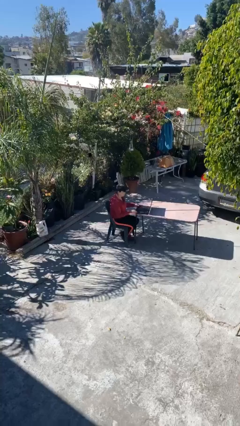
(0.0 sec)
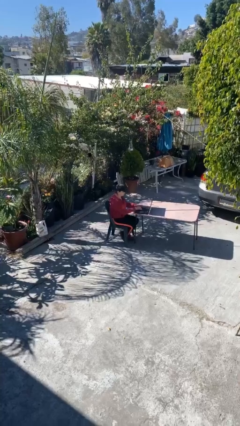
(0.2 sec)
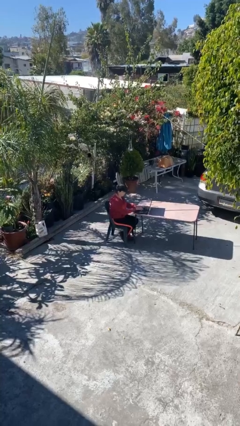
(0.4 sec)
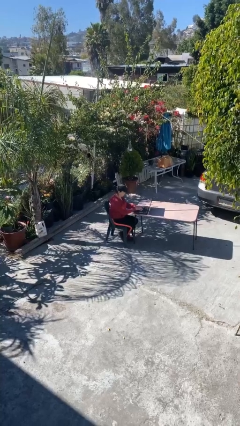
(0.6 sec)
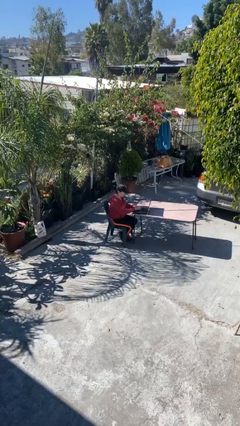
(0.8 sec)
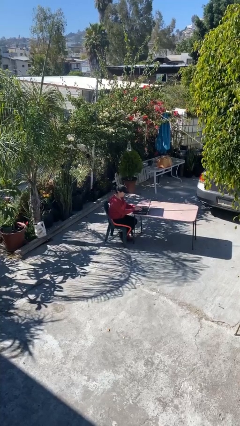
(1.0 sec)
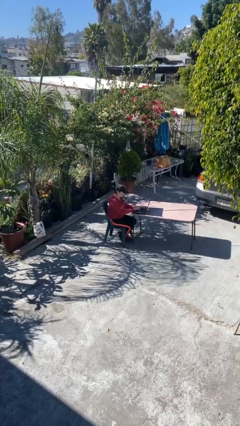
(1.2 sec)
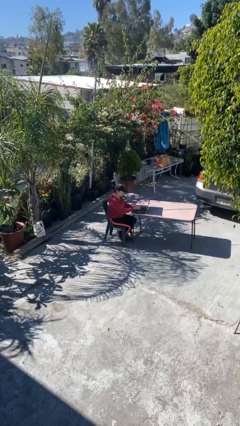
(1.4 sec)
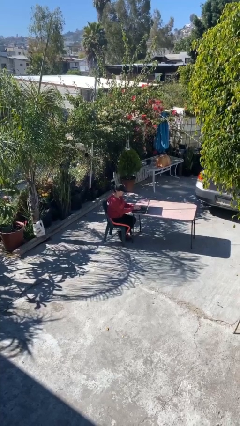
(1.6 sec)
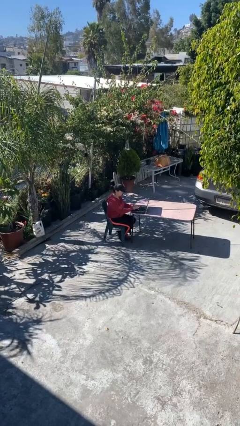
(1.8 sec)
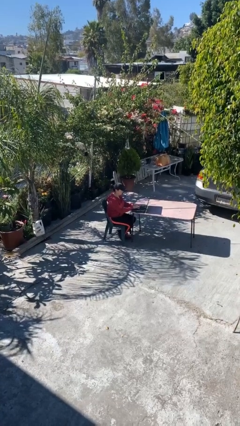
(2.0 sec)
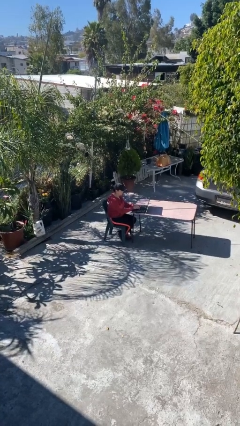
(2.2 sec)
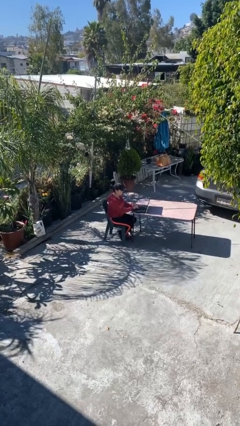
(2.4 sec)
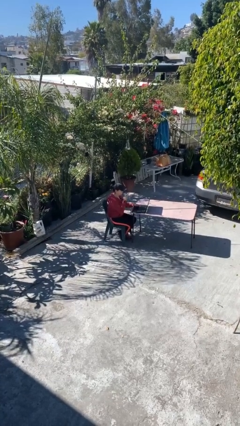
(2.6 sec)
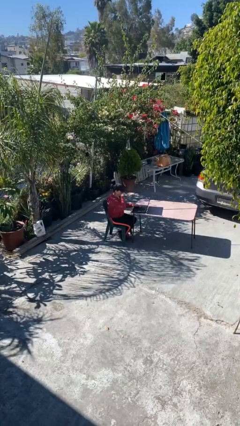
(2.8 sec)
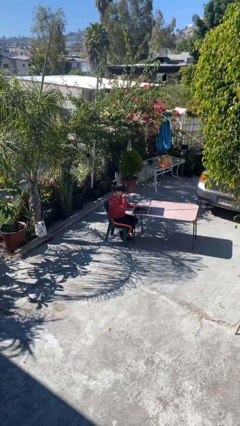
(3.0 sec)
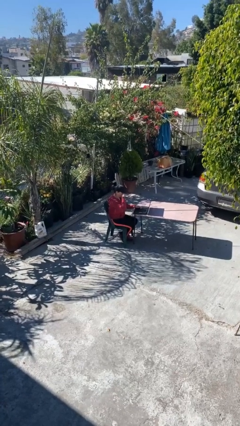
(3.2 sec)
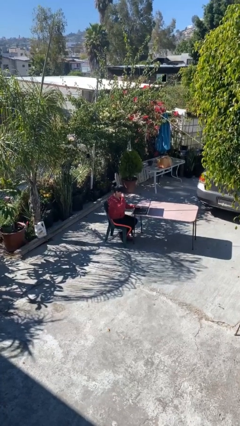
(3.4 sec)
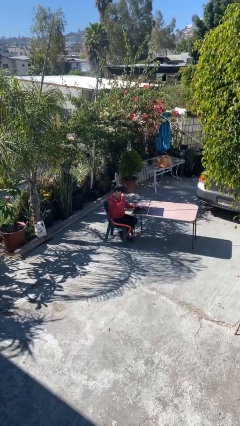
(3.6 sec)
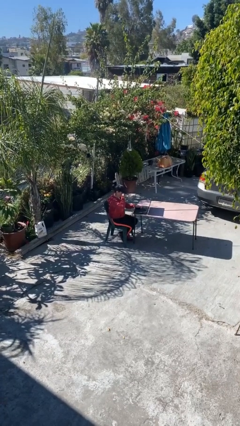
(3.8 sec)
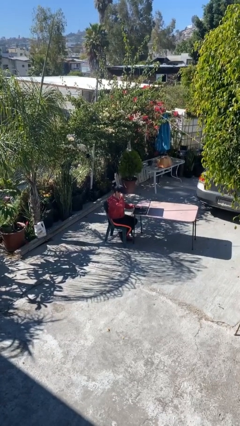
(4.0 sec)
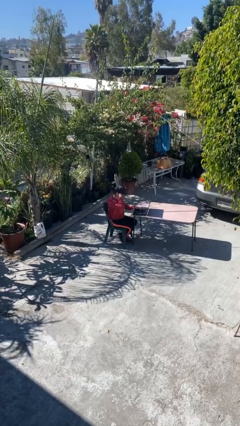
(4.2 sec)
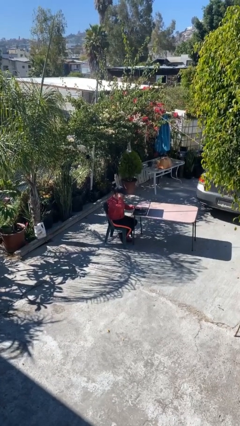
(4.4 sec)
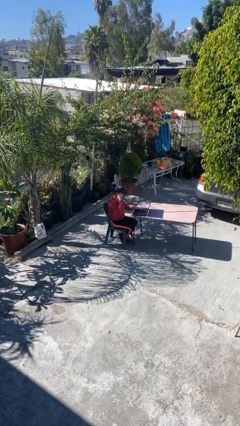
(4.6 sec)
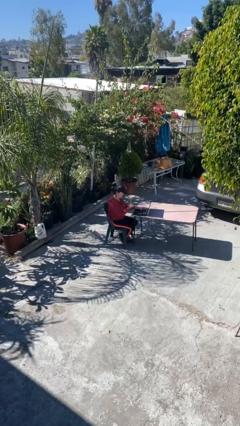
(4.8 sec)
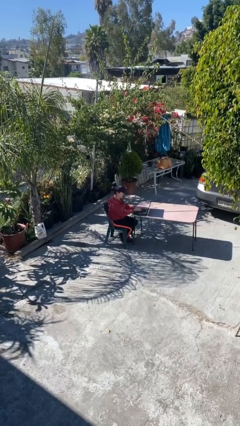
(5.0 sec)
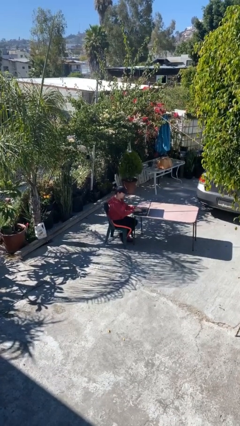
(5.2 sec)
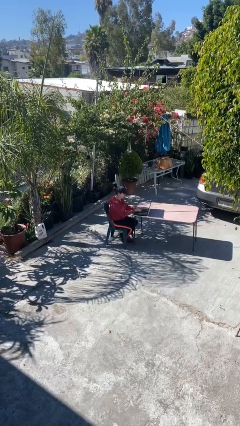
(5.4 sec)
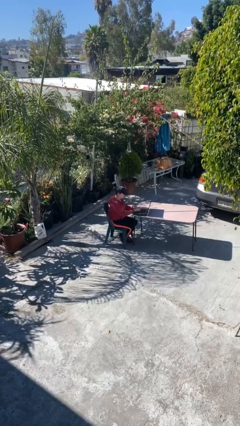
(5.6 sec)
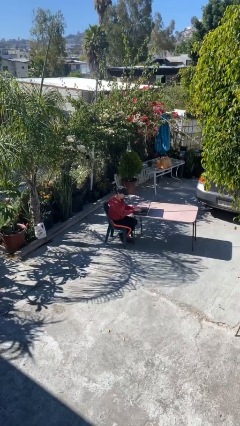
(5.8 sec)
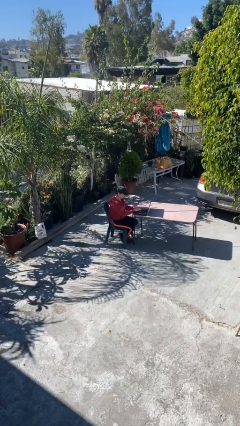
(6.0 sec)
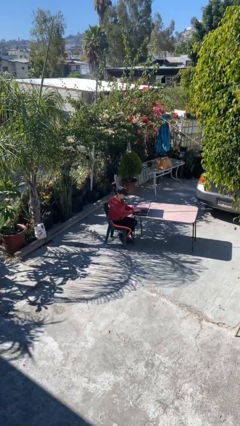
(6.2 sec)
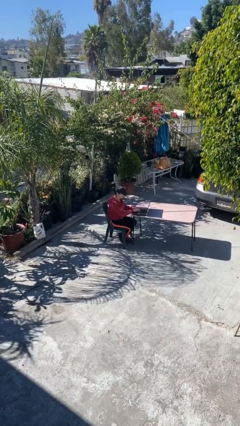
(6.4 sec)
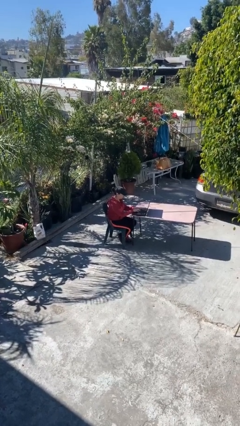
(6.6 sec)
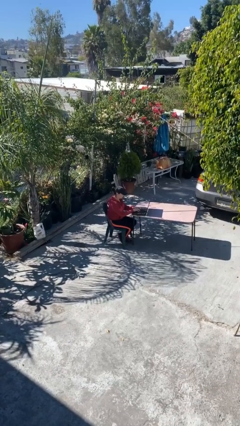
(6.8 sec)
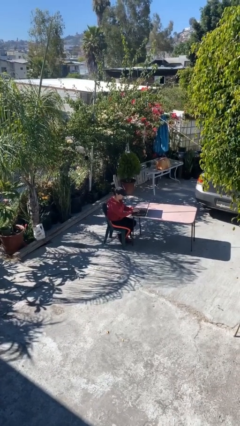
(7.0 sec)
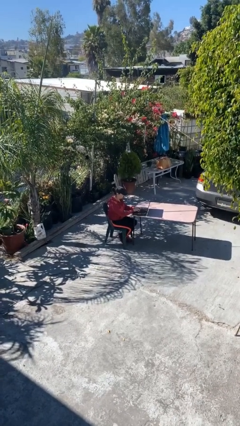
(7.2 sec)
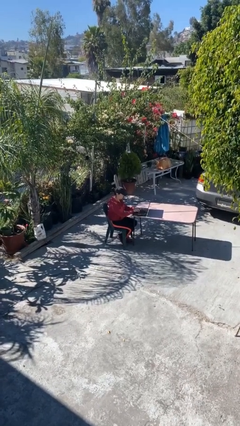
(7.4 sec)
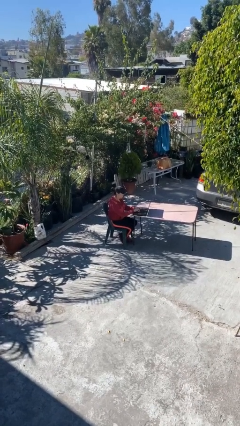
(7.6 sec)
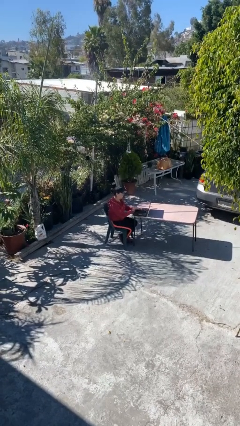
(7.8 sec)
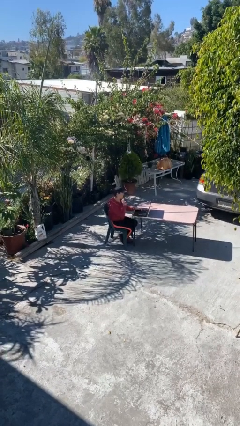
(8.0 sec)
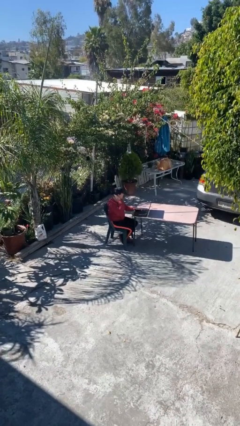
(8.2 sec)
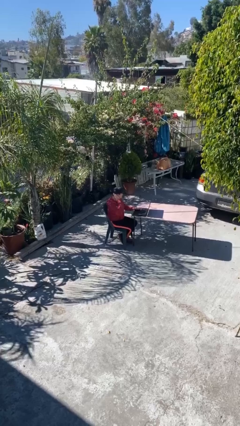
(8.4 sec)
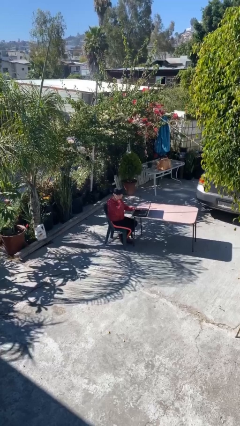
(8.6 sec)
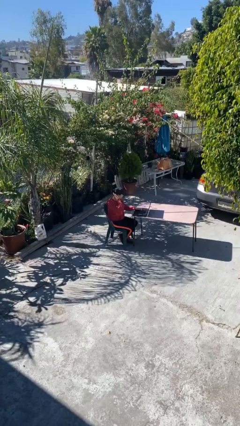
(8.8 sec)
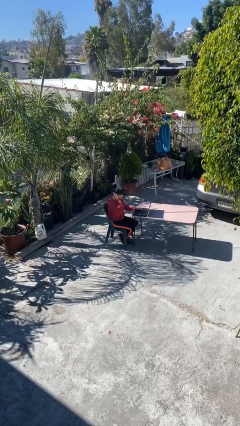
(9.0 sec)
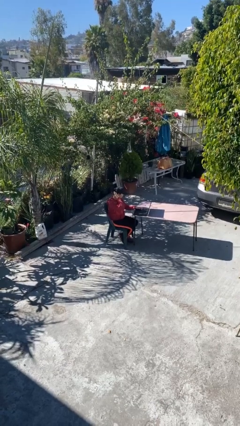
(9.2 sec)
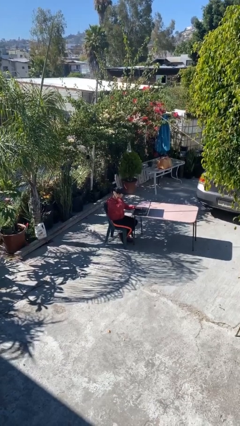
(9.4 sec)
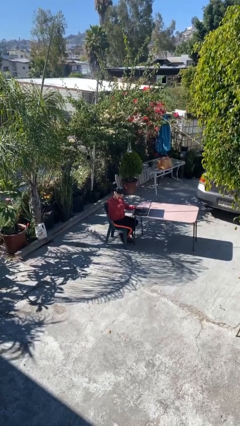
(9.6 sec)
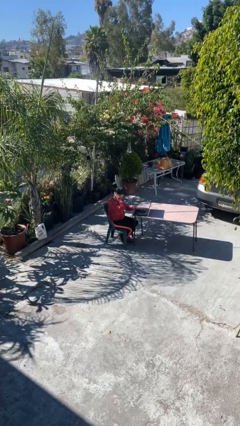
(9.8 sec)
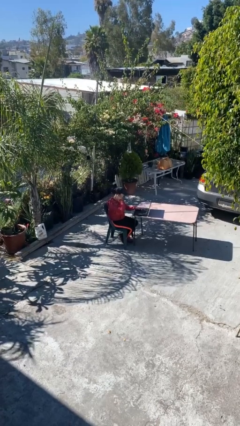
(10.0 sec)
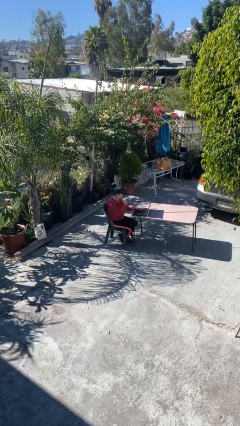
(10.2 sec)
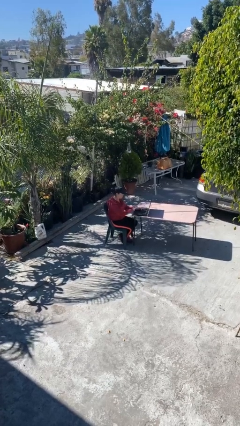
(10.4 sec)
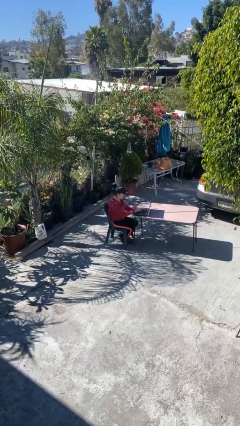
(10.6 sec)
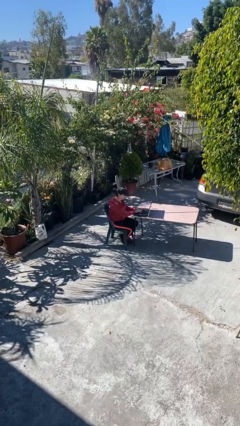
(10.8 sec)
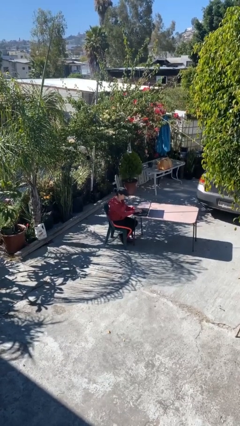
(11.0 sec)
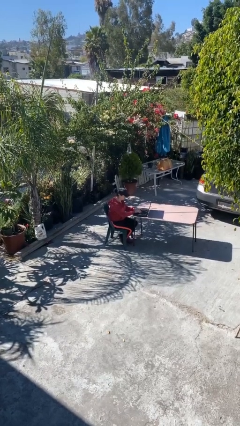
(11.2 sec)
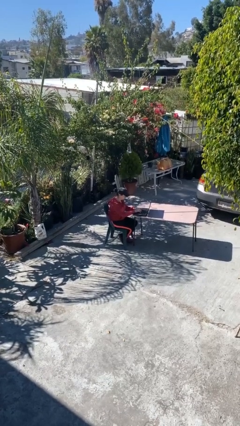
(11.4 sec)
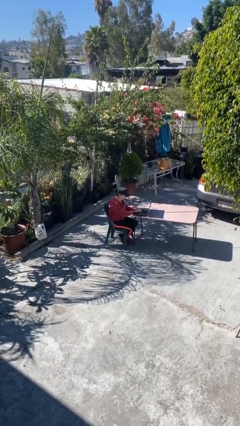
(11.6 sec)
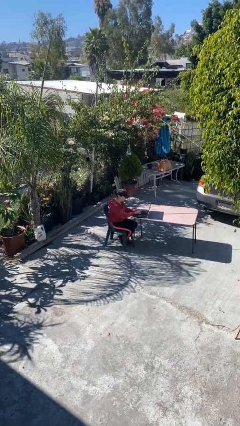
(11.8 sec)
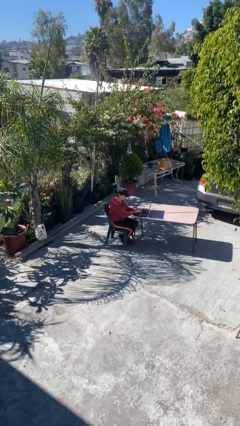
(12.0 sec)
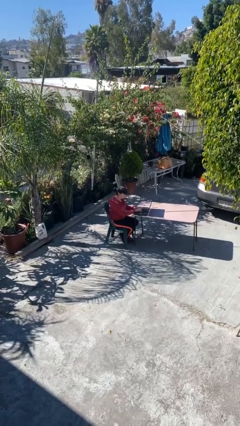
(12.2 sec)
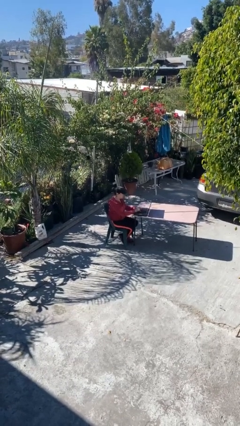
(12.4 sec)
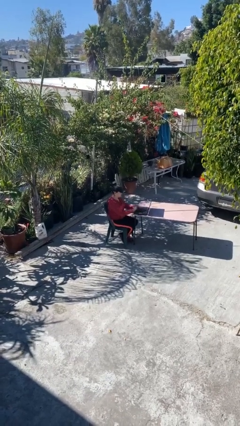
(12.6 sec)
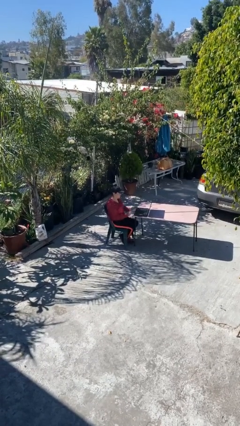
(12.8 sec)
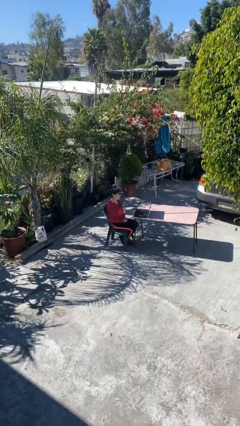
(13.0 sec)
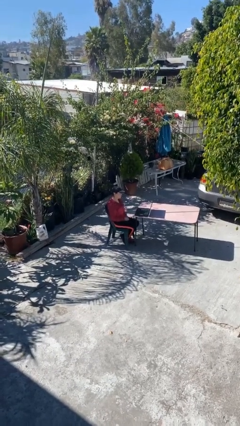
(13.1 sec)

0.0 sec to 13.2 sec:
person interacts with laptop

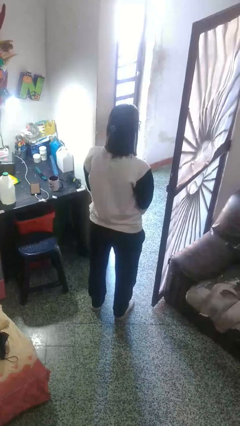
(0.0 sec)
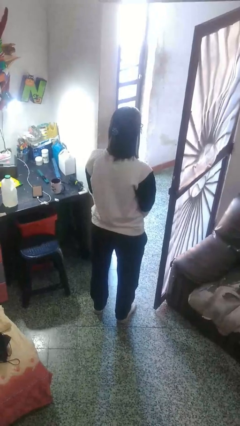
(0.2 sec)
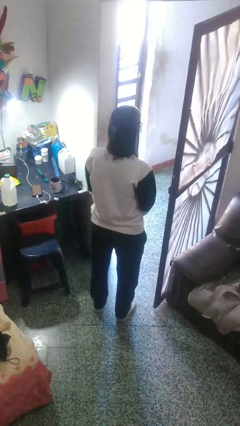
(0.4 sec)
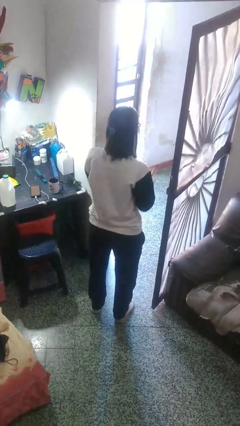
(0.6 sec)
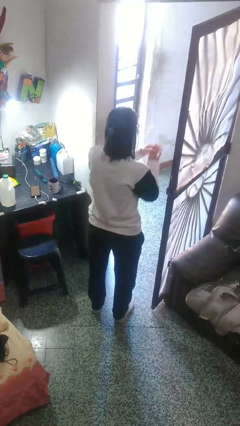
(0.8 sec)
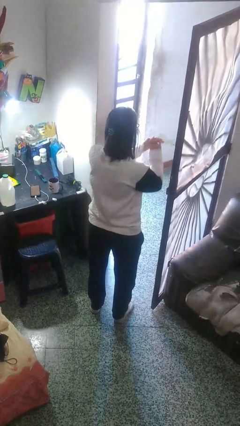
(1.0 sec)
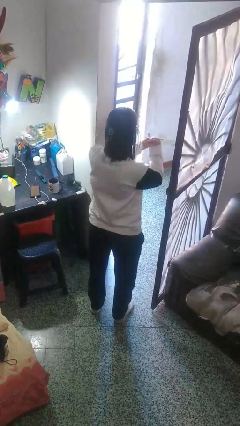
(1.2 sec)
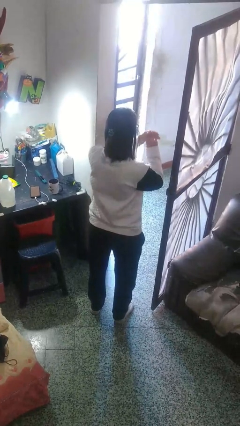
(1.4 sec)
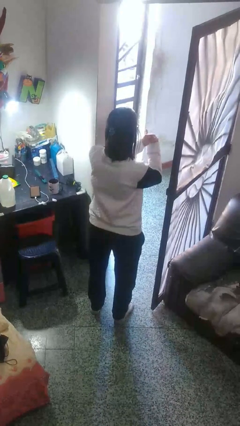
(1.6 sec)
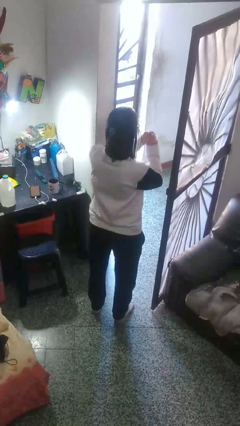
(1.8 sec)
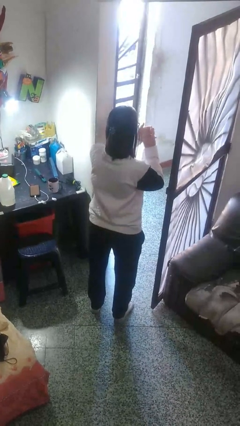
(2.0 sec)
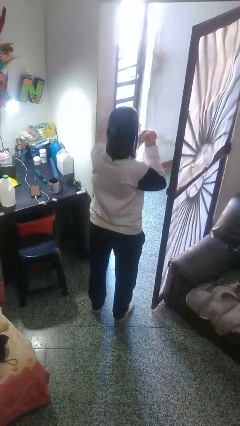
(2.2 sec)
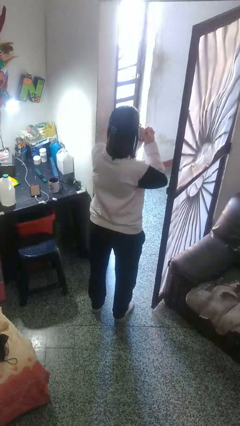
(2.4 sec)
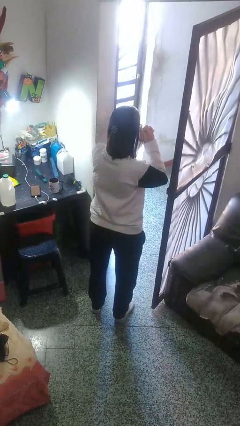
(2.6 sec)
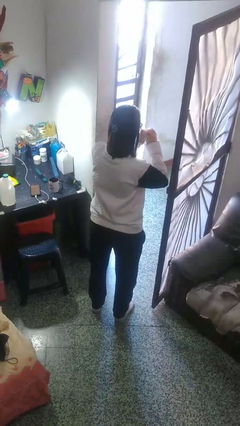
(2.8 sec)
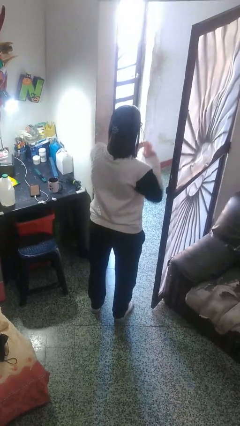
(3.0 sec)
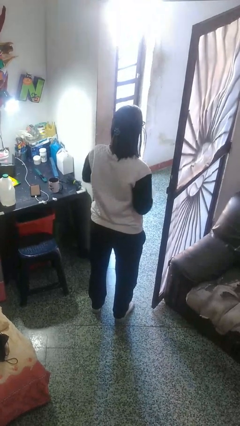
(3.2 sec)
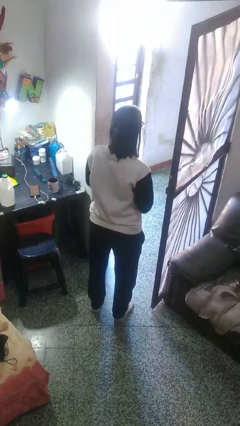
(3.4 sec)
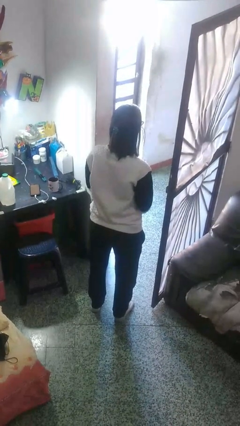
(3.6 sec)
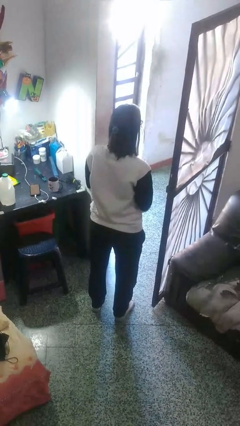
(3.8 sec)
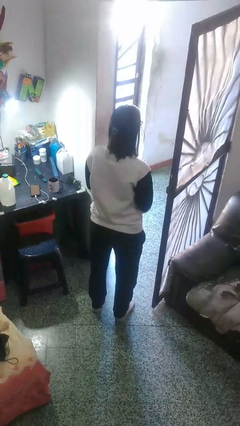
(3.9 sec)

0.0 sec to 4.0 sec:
person cracks knuckles

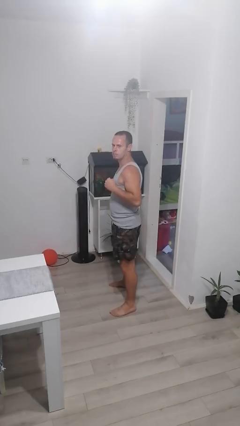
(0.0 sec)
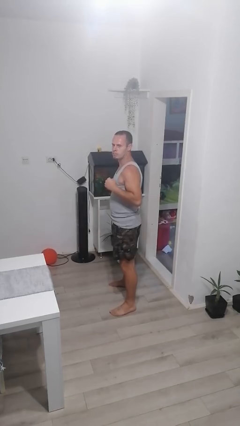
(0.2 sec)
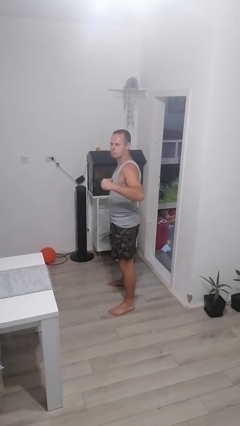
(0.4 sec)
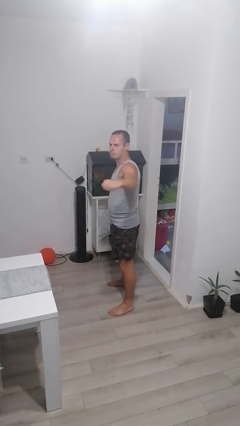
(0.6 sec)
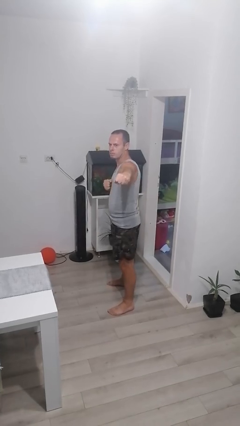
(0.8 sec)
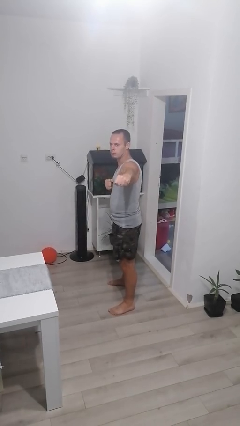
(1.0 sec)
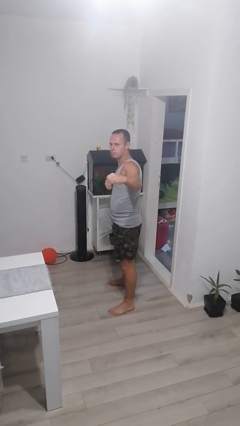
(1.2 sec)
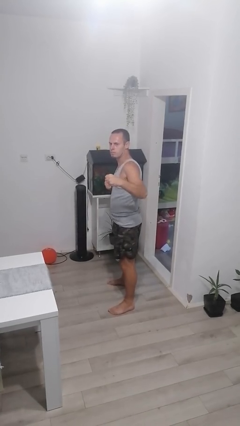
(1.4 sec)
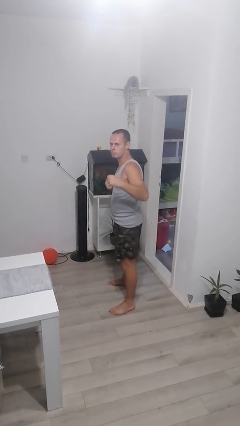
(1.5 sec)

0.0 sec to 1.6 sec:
person karate chop
